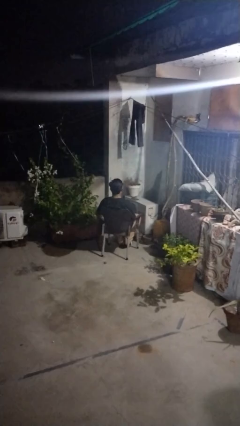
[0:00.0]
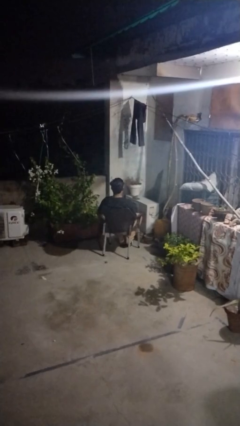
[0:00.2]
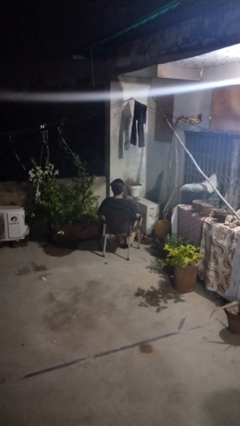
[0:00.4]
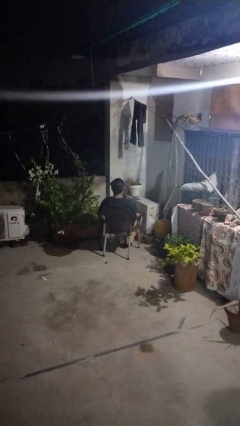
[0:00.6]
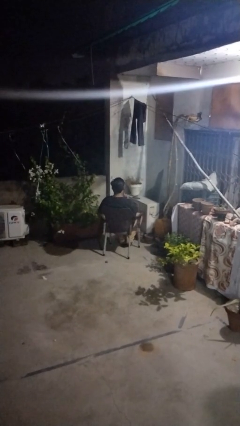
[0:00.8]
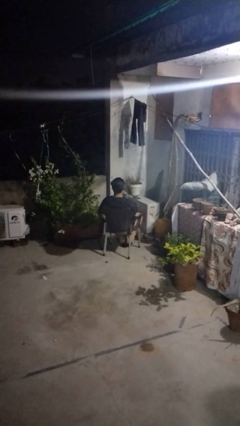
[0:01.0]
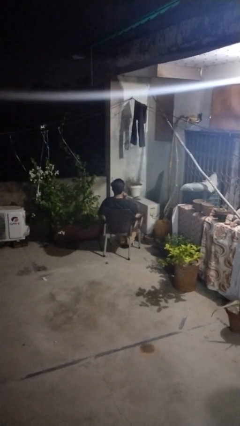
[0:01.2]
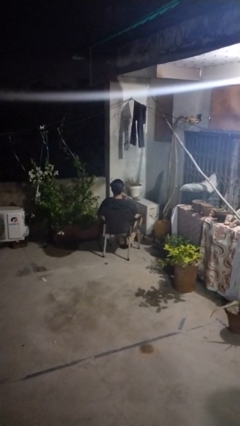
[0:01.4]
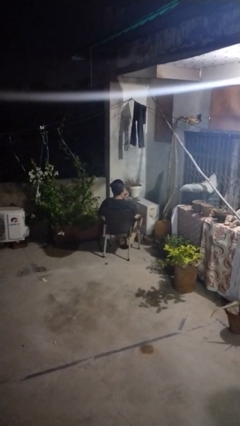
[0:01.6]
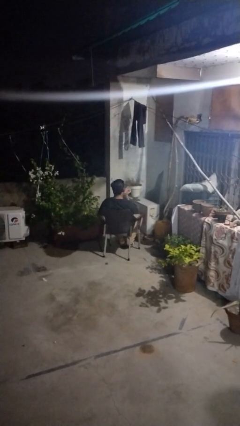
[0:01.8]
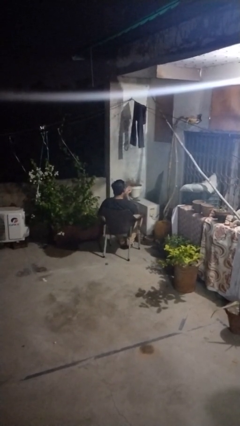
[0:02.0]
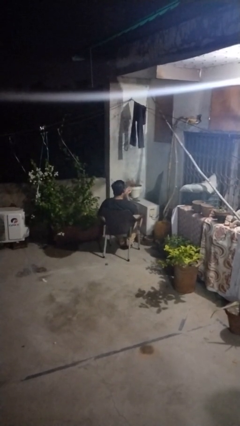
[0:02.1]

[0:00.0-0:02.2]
person gestures blow kiss

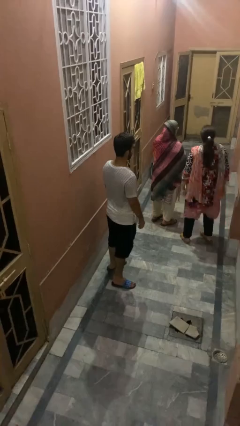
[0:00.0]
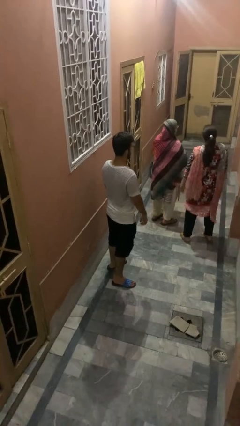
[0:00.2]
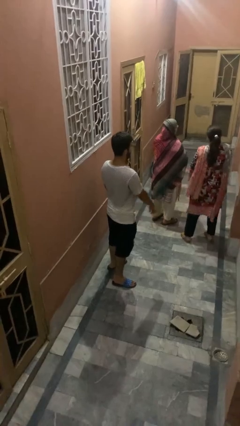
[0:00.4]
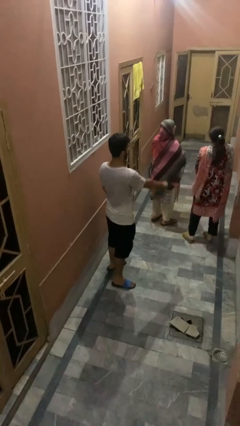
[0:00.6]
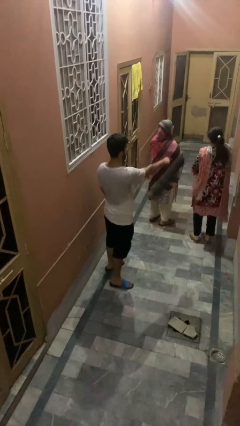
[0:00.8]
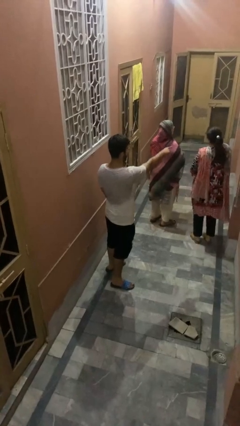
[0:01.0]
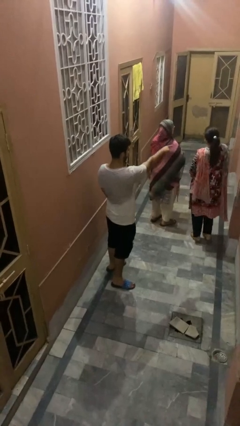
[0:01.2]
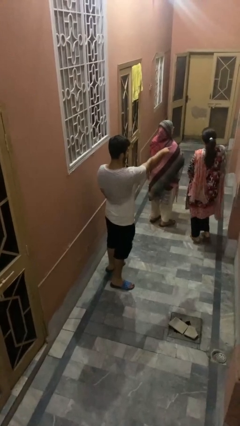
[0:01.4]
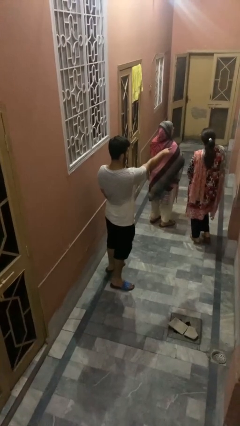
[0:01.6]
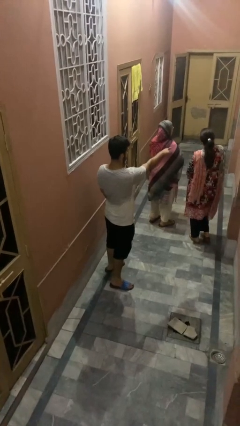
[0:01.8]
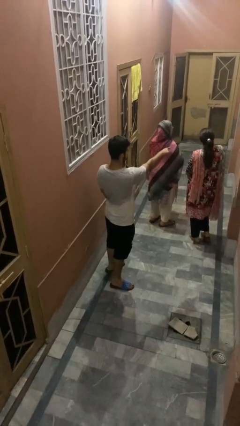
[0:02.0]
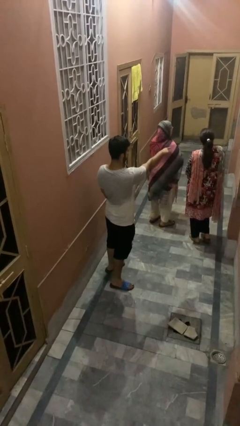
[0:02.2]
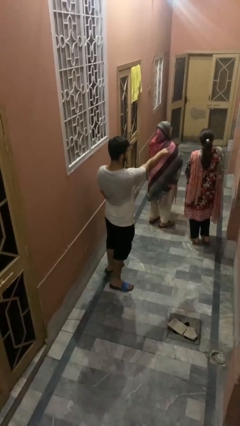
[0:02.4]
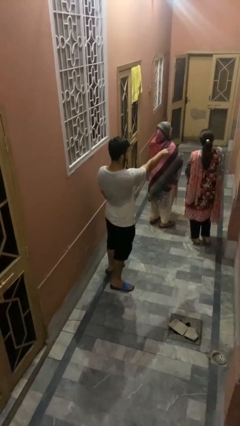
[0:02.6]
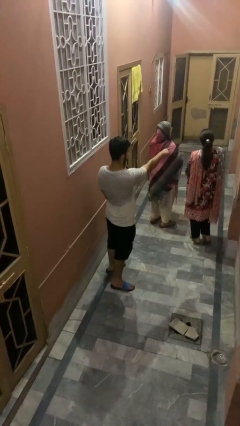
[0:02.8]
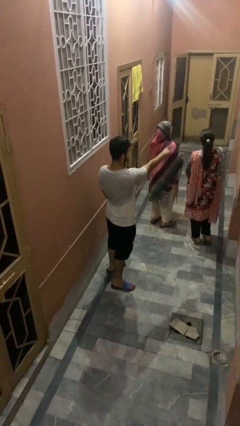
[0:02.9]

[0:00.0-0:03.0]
person points at person

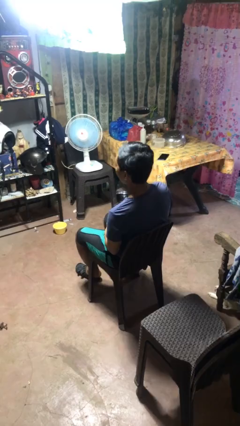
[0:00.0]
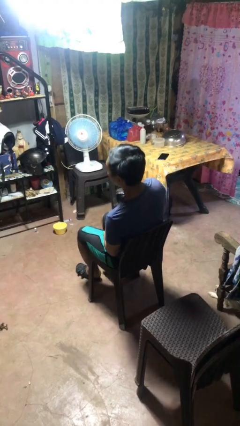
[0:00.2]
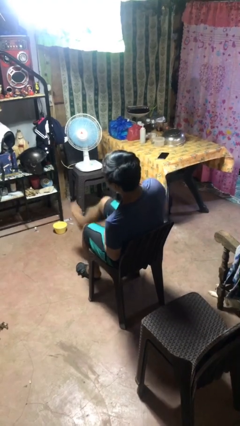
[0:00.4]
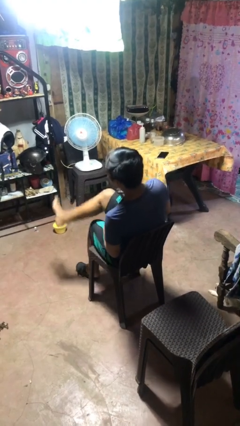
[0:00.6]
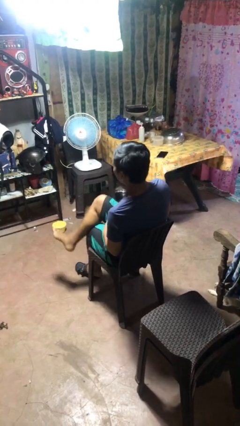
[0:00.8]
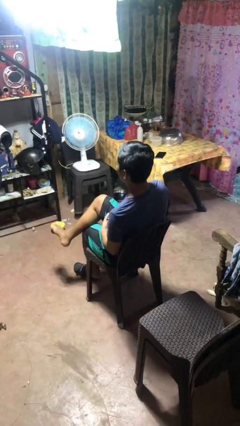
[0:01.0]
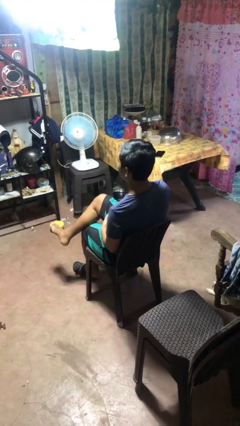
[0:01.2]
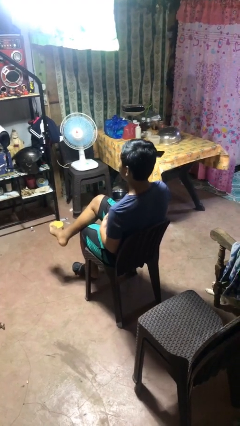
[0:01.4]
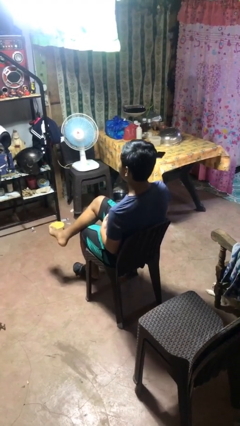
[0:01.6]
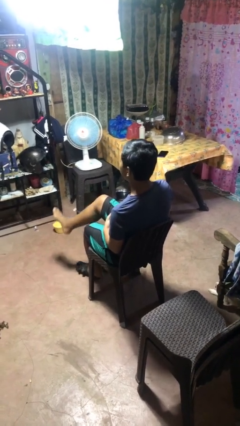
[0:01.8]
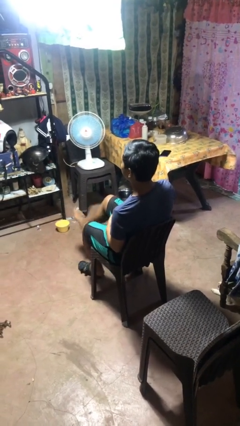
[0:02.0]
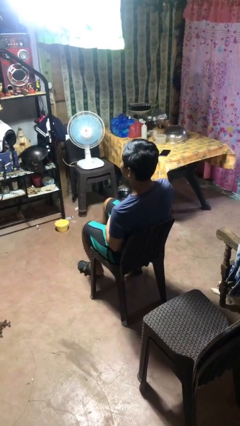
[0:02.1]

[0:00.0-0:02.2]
person crosses legs

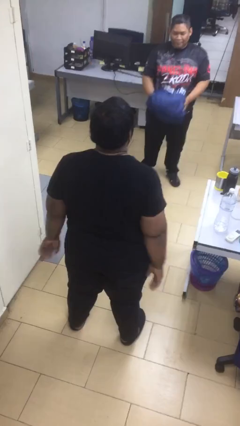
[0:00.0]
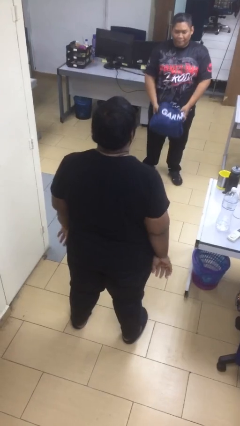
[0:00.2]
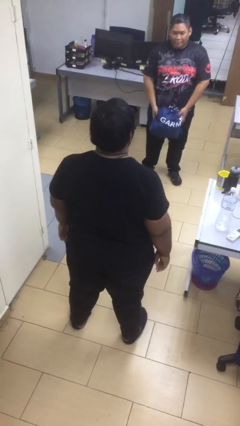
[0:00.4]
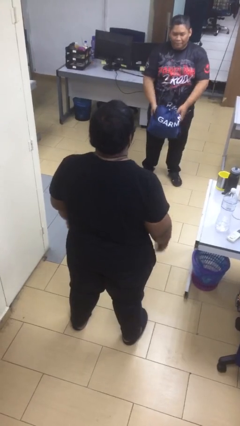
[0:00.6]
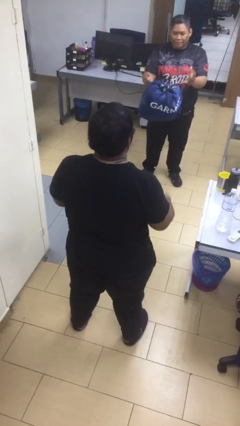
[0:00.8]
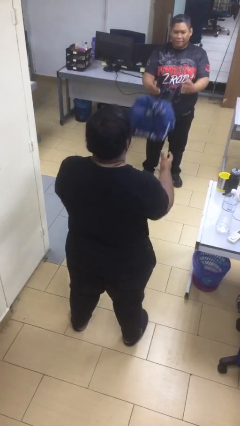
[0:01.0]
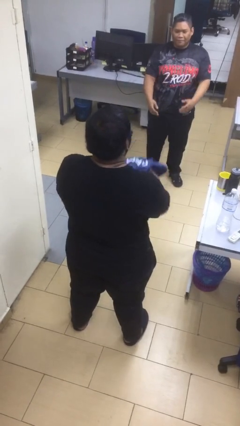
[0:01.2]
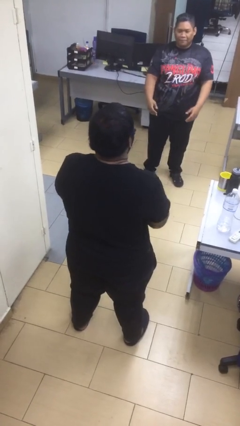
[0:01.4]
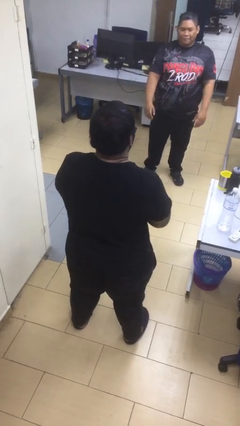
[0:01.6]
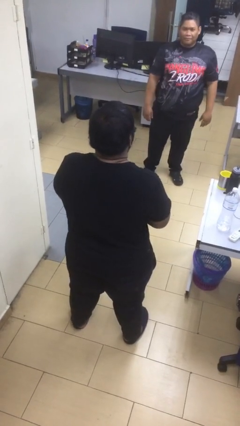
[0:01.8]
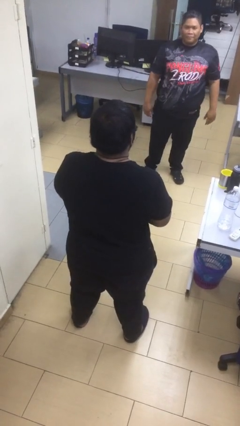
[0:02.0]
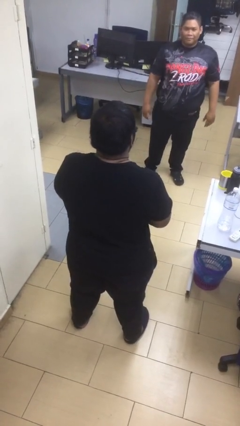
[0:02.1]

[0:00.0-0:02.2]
person catches object from person

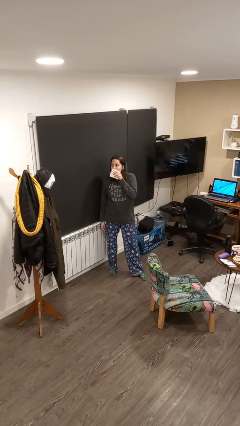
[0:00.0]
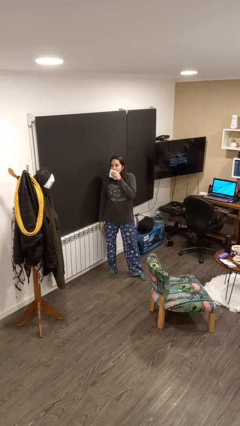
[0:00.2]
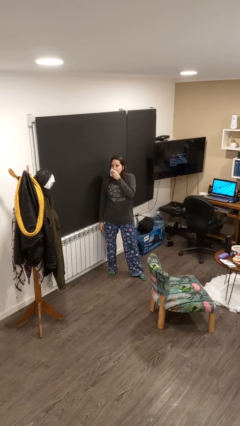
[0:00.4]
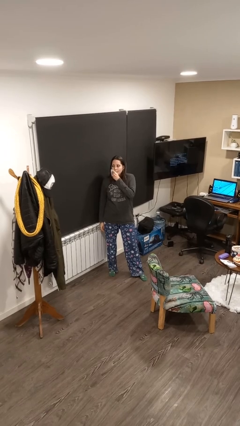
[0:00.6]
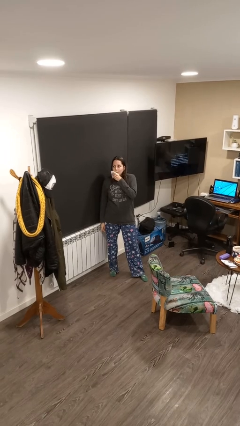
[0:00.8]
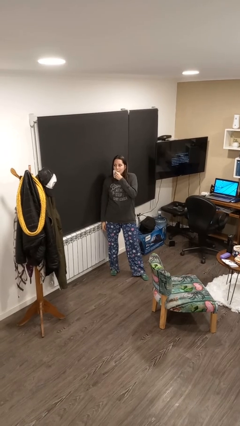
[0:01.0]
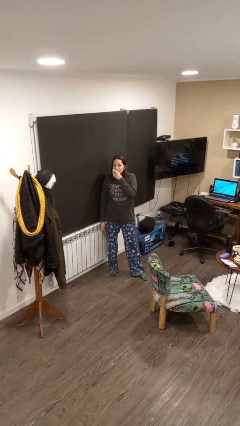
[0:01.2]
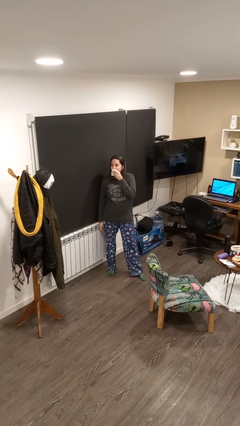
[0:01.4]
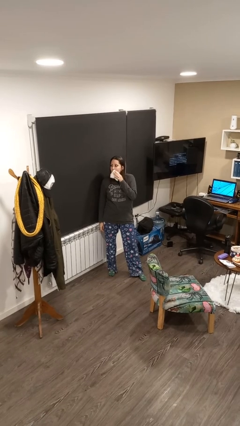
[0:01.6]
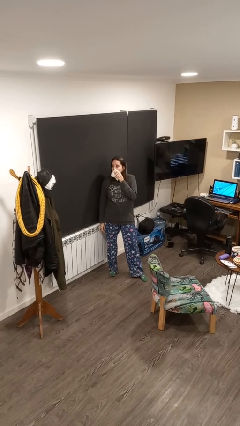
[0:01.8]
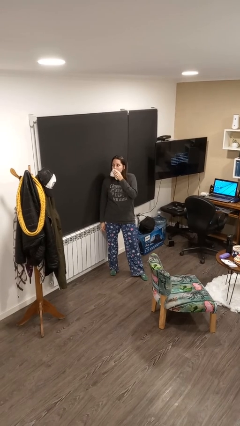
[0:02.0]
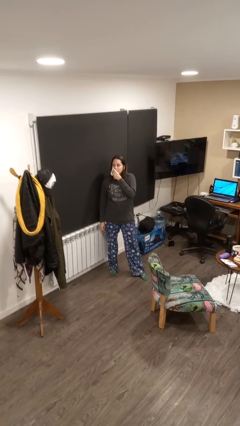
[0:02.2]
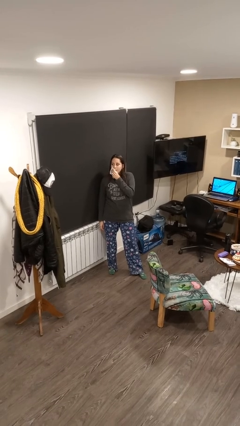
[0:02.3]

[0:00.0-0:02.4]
person wipes mouth with napkin

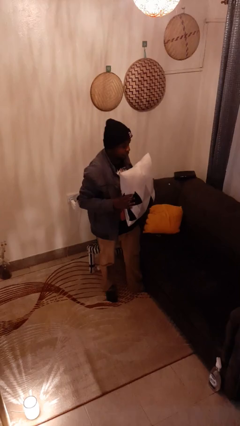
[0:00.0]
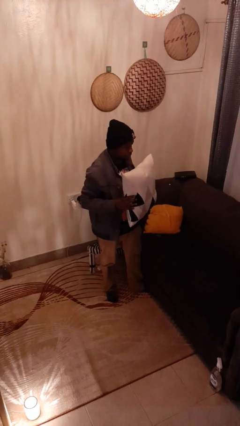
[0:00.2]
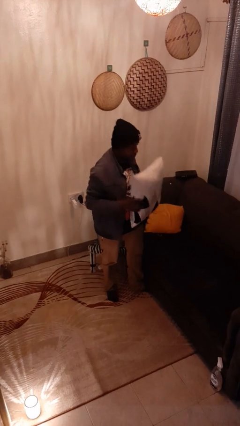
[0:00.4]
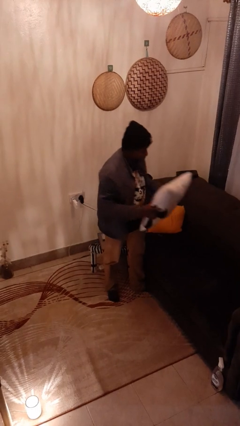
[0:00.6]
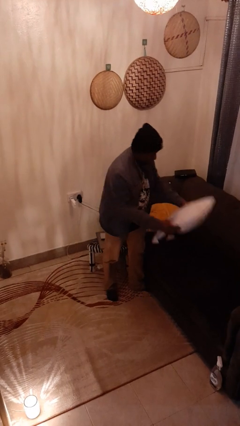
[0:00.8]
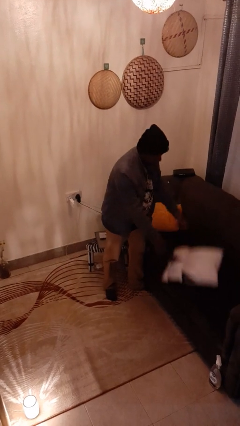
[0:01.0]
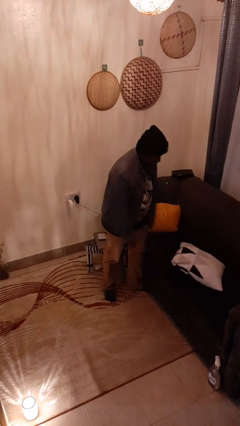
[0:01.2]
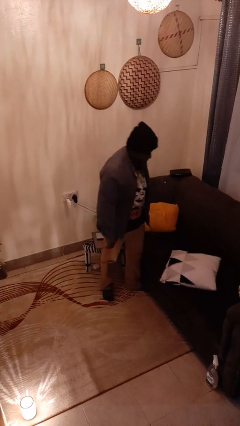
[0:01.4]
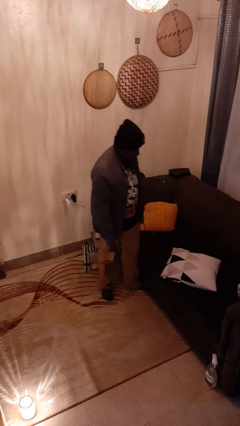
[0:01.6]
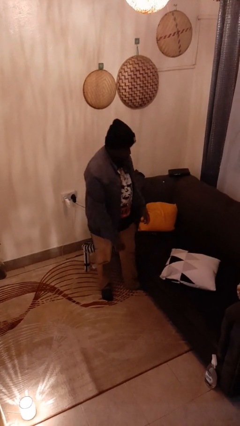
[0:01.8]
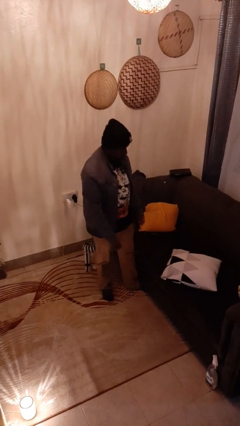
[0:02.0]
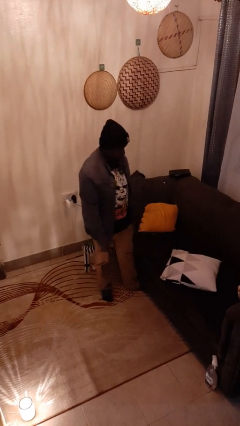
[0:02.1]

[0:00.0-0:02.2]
person puts down object on couch

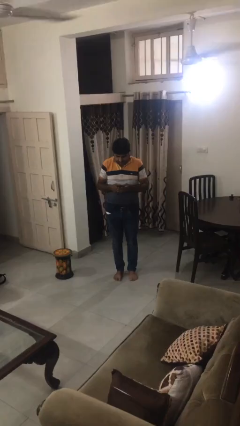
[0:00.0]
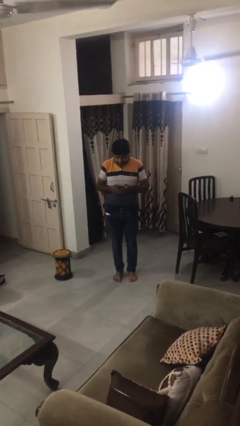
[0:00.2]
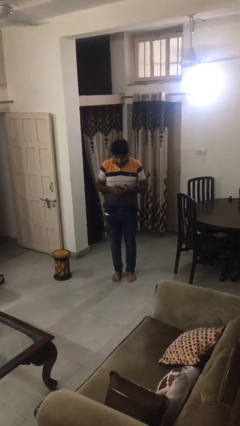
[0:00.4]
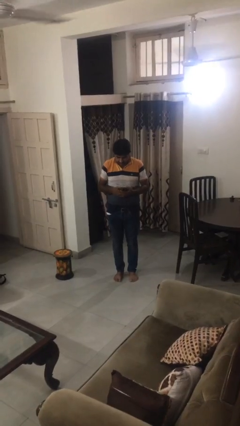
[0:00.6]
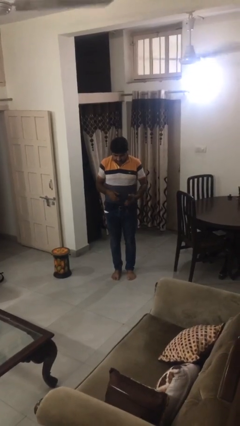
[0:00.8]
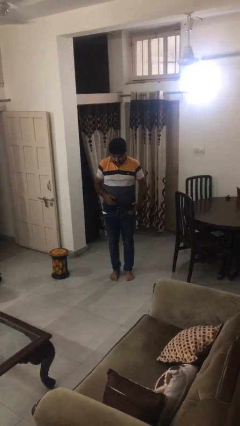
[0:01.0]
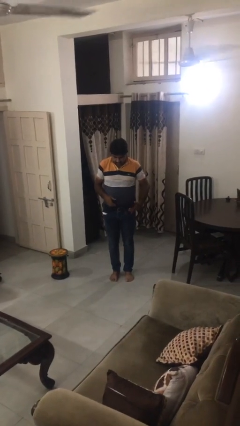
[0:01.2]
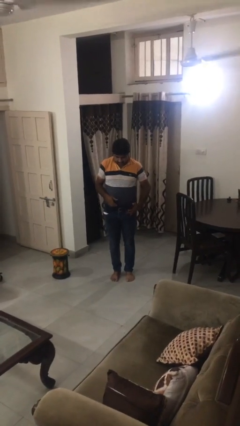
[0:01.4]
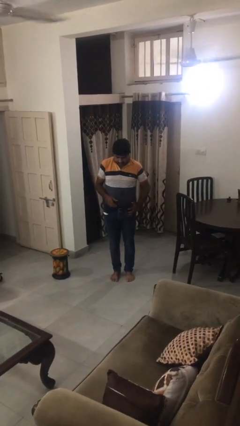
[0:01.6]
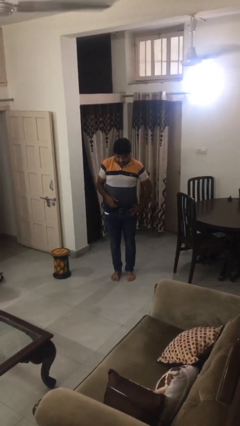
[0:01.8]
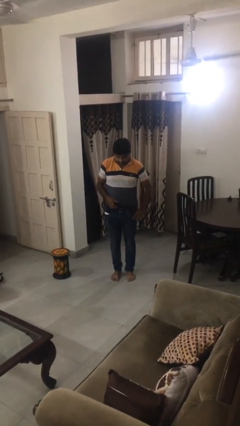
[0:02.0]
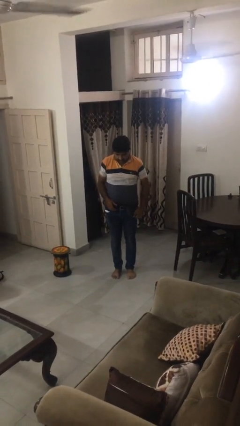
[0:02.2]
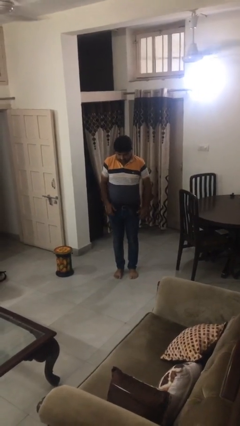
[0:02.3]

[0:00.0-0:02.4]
person puts phone into pocket
